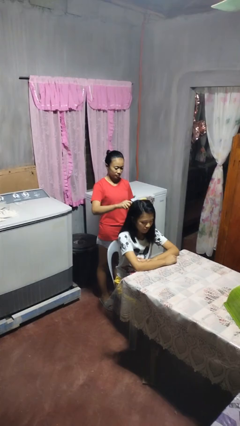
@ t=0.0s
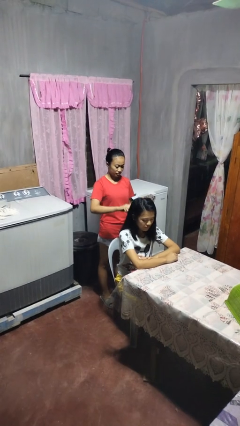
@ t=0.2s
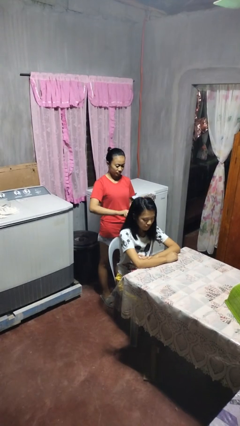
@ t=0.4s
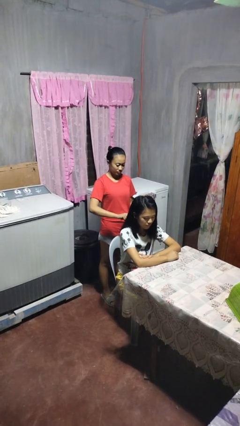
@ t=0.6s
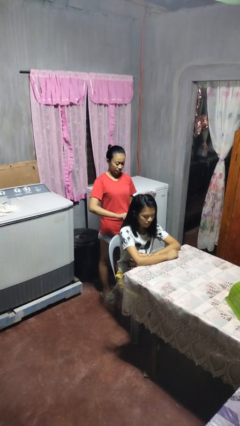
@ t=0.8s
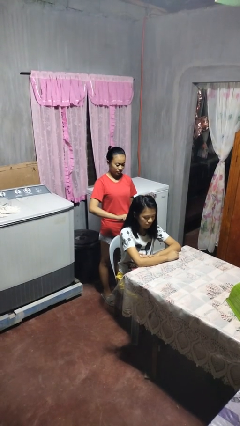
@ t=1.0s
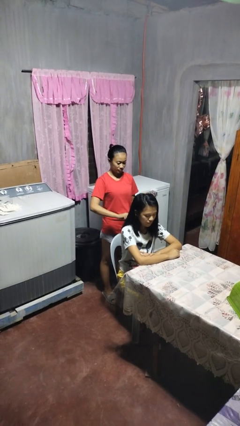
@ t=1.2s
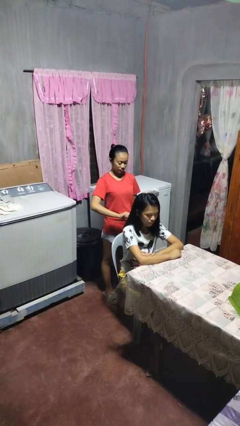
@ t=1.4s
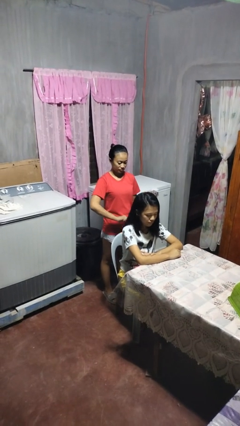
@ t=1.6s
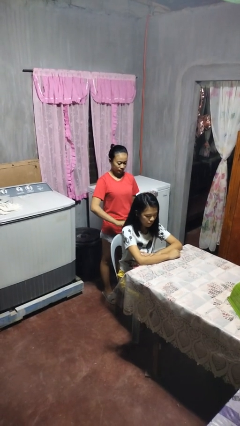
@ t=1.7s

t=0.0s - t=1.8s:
person brushes hair of person

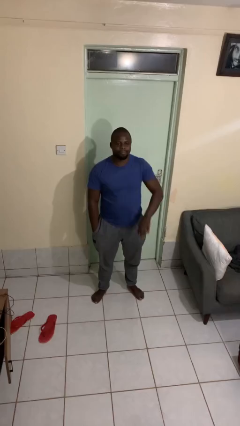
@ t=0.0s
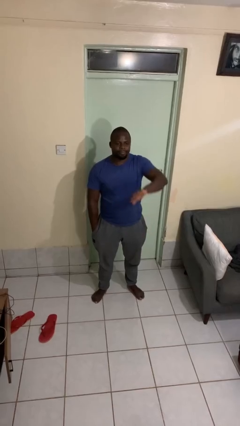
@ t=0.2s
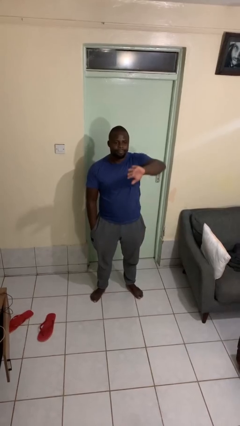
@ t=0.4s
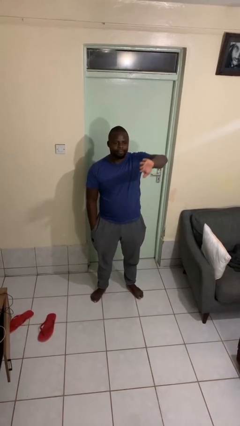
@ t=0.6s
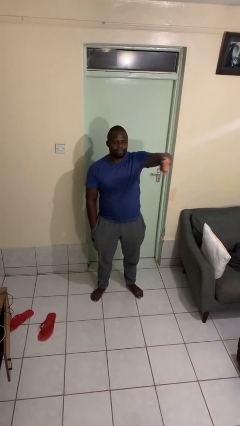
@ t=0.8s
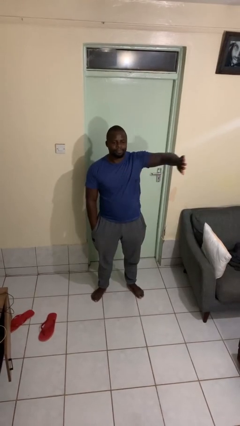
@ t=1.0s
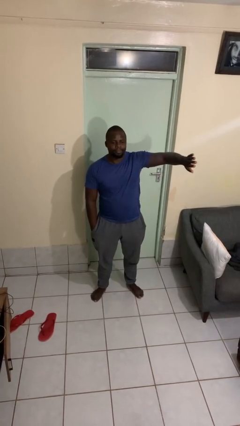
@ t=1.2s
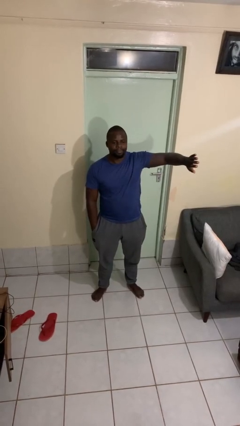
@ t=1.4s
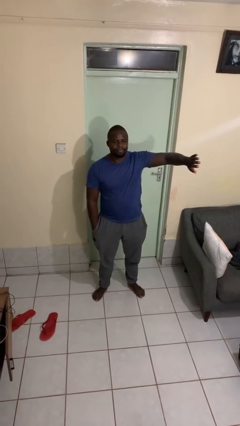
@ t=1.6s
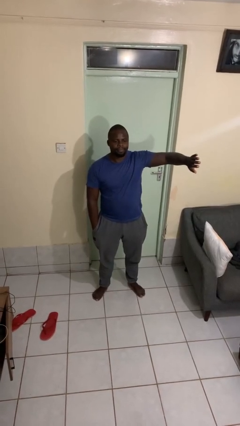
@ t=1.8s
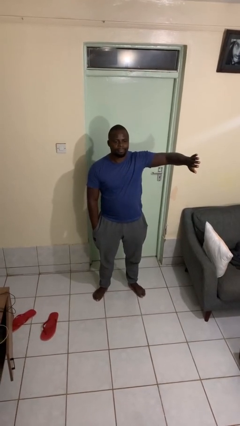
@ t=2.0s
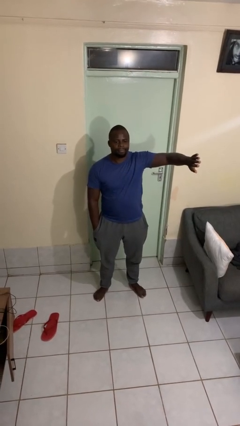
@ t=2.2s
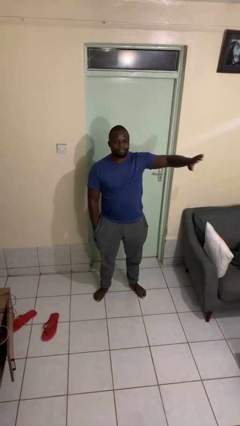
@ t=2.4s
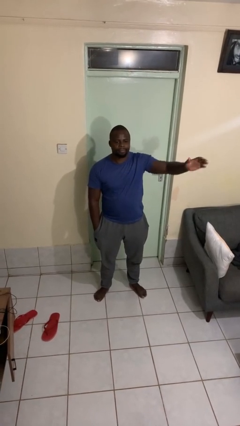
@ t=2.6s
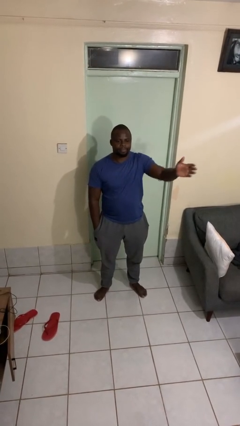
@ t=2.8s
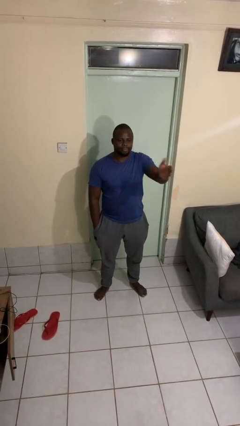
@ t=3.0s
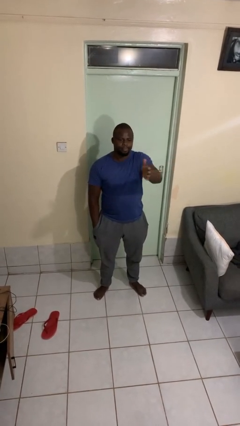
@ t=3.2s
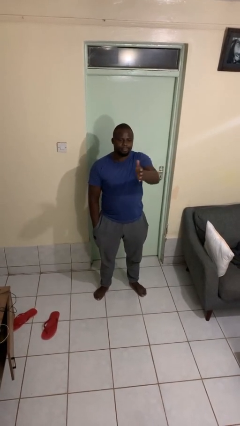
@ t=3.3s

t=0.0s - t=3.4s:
person gestures swipe left

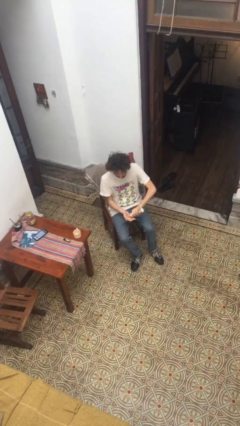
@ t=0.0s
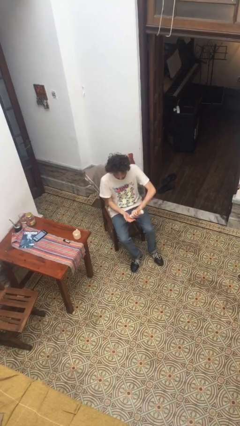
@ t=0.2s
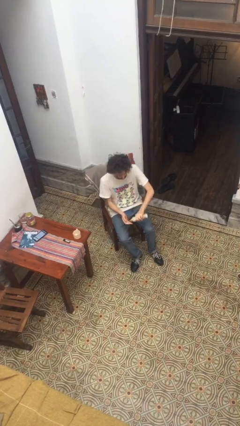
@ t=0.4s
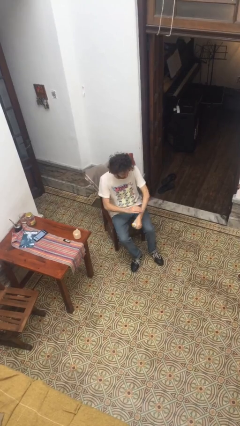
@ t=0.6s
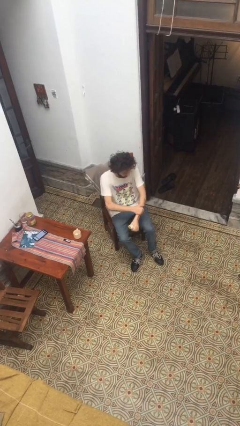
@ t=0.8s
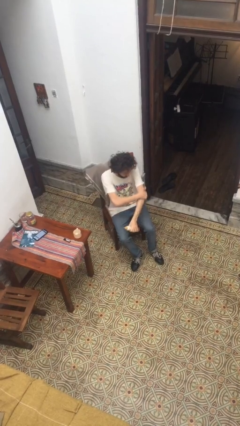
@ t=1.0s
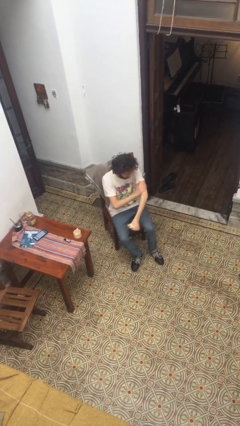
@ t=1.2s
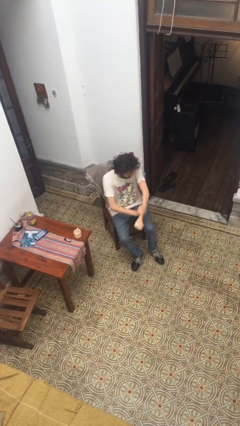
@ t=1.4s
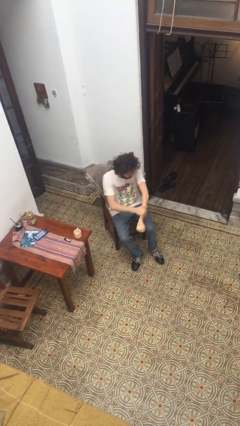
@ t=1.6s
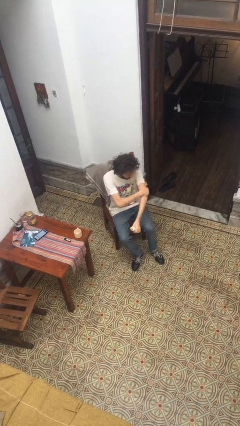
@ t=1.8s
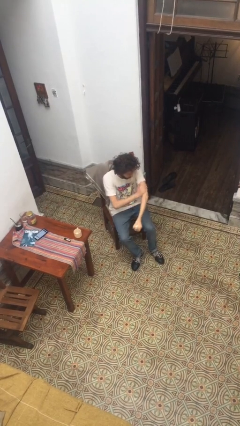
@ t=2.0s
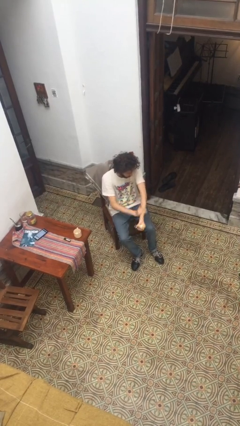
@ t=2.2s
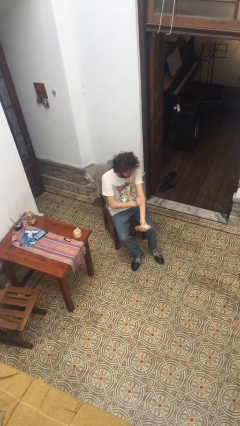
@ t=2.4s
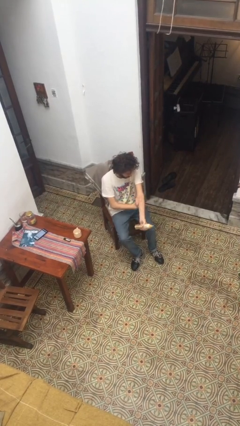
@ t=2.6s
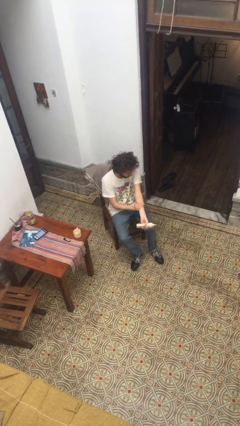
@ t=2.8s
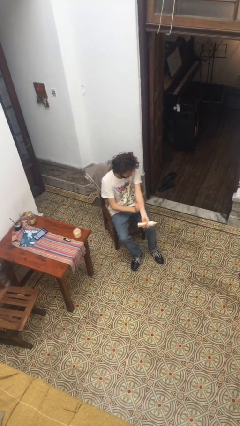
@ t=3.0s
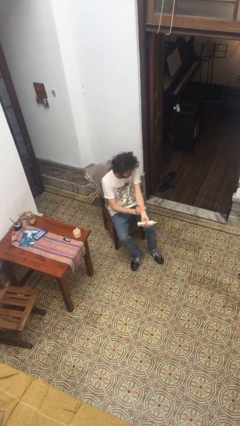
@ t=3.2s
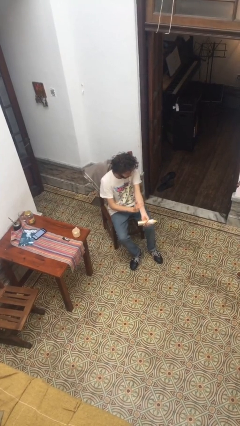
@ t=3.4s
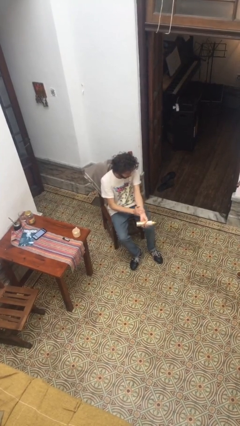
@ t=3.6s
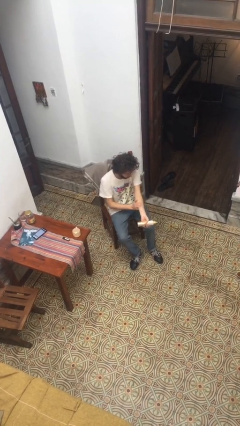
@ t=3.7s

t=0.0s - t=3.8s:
person applies sunscreen

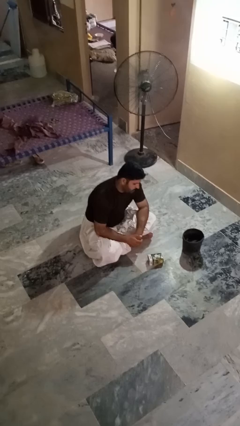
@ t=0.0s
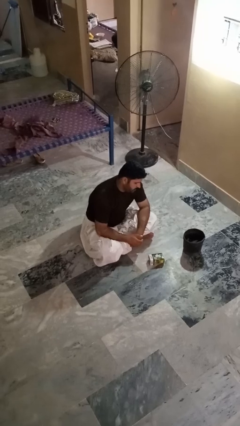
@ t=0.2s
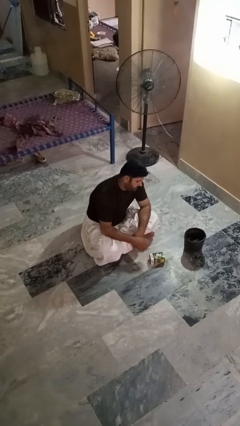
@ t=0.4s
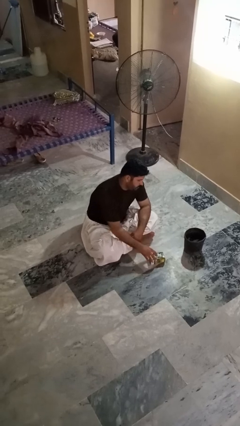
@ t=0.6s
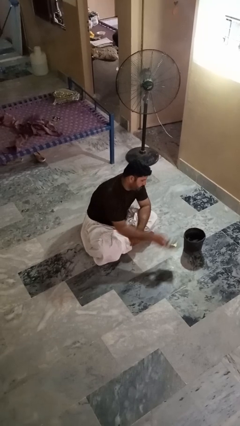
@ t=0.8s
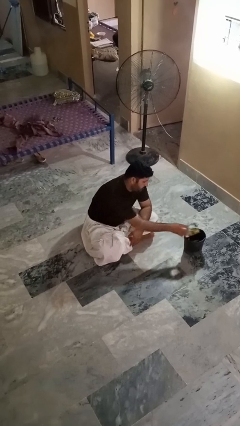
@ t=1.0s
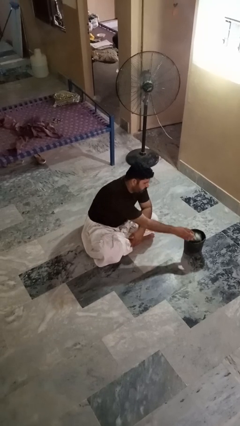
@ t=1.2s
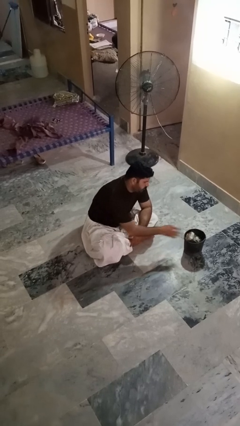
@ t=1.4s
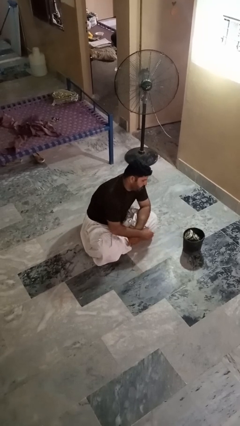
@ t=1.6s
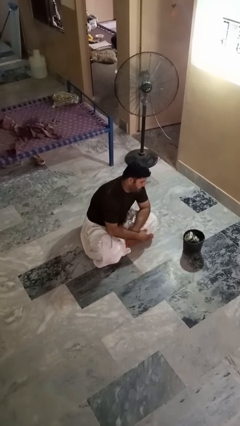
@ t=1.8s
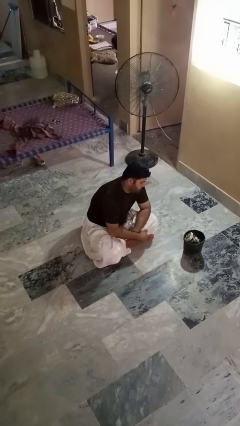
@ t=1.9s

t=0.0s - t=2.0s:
person puts object into basket

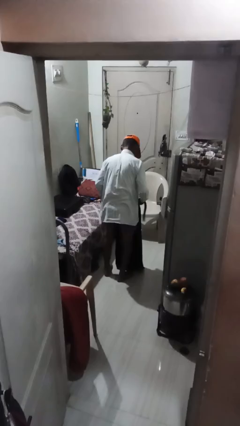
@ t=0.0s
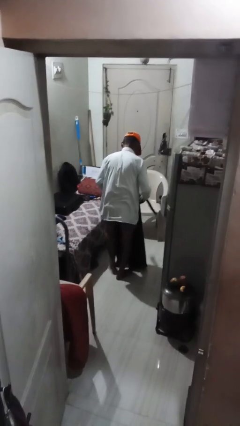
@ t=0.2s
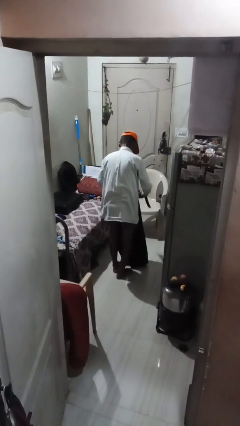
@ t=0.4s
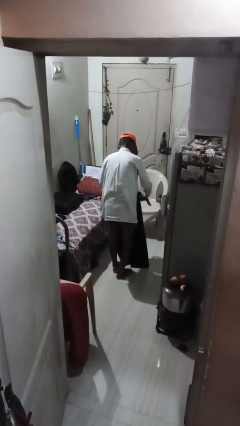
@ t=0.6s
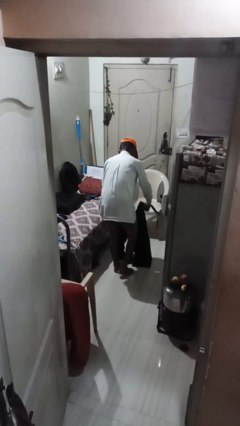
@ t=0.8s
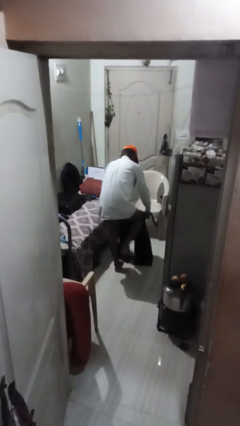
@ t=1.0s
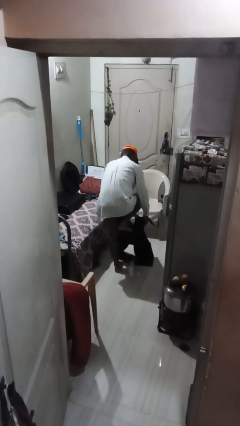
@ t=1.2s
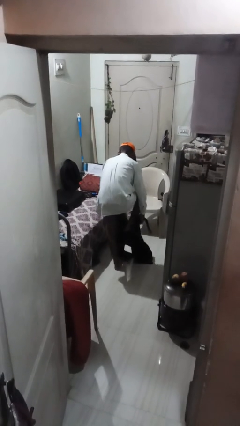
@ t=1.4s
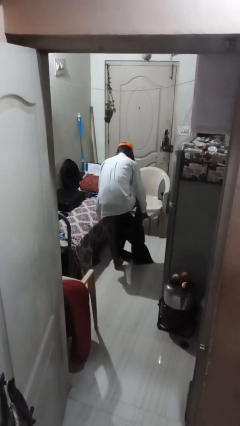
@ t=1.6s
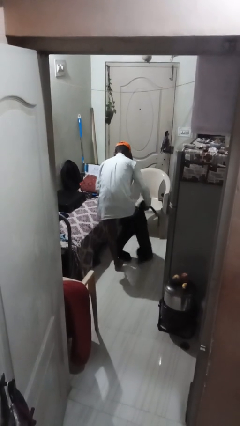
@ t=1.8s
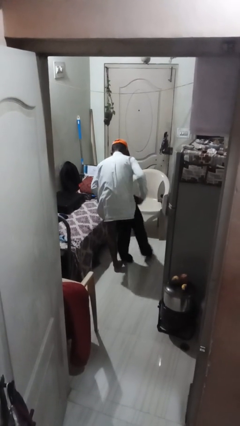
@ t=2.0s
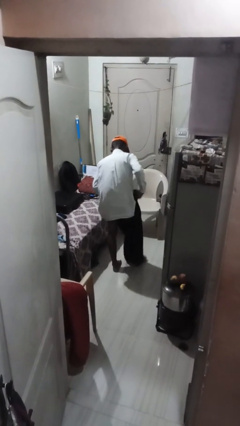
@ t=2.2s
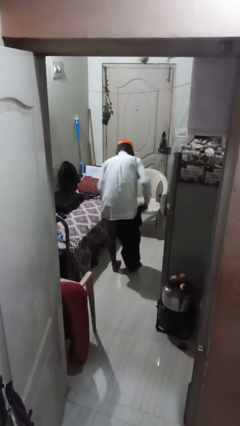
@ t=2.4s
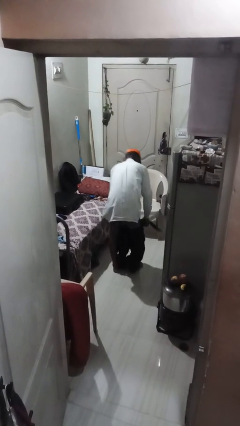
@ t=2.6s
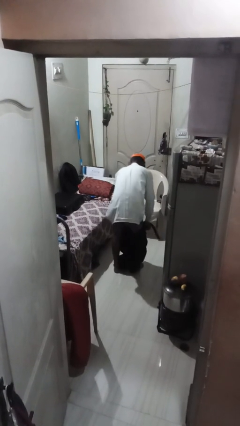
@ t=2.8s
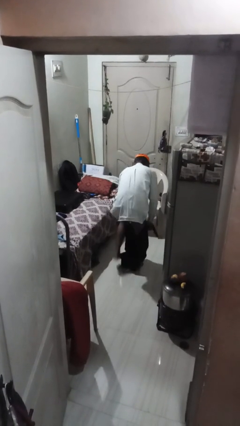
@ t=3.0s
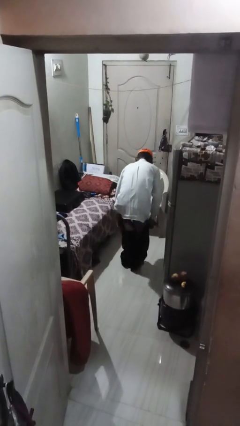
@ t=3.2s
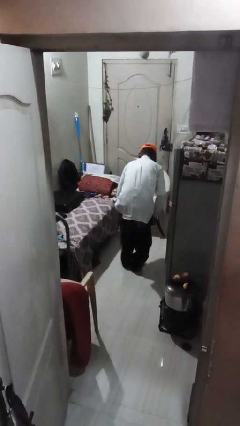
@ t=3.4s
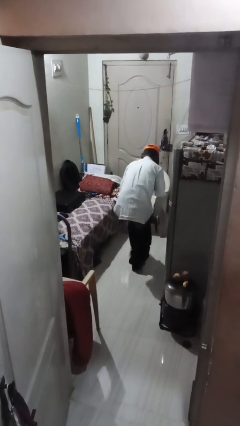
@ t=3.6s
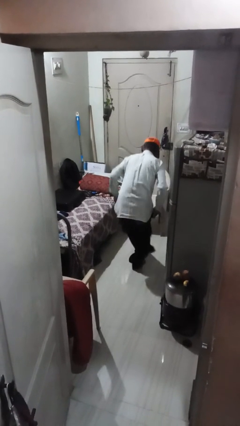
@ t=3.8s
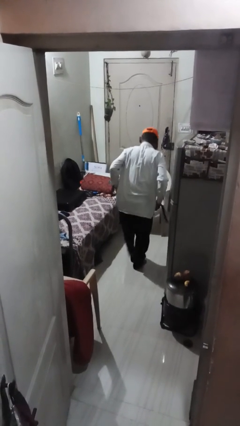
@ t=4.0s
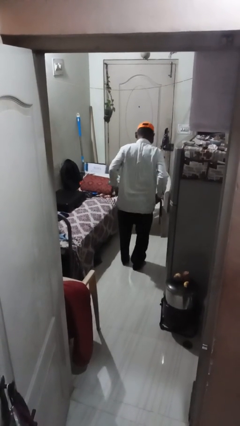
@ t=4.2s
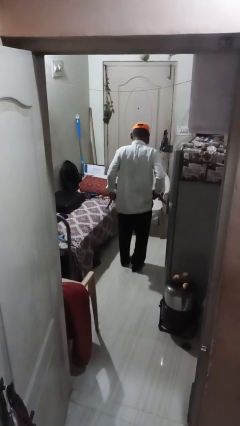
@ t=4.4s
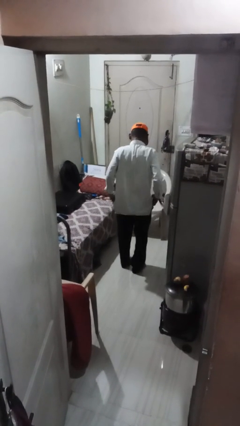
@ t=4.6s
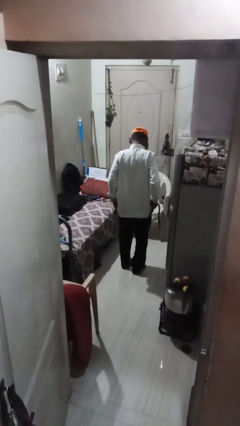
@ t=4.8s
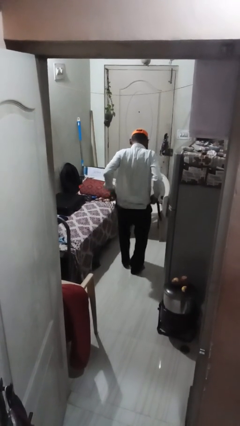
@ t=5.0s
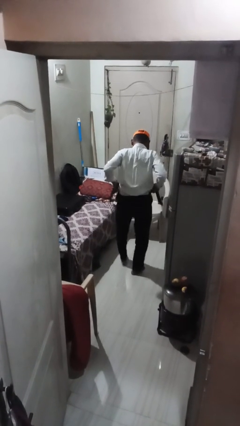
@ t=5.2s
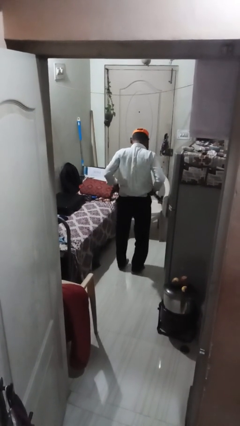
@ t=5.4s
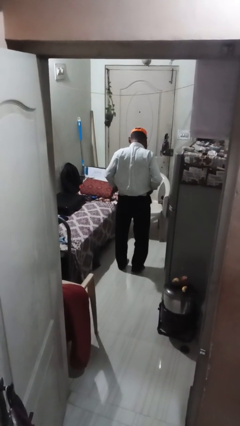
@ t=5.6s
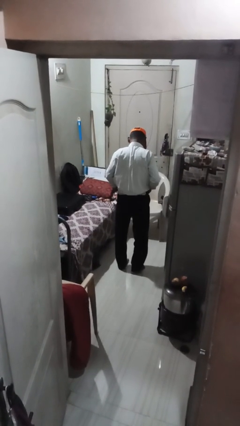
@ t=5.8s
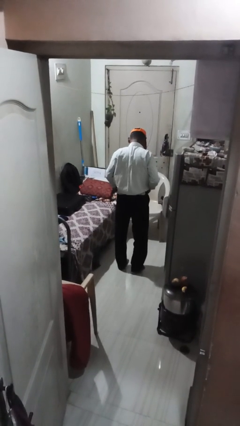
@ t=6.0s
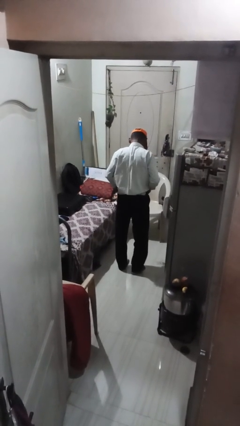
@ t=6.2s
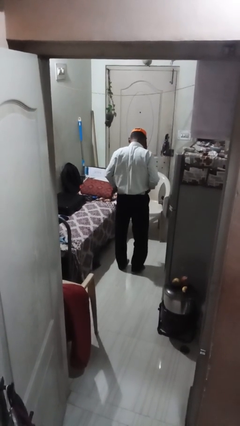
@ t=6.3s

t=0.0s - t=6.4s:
person puts on pants
